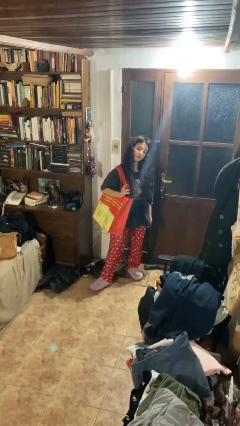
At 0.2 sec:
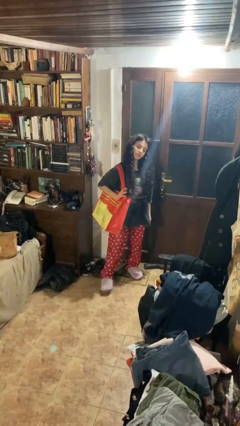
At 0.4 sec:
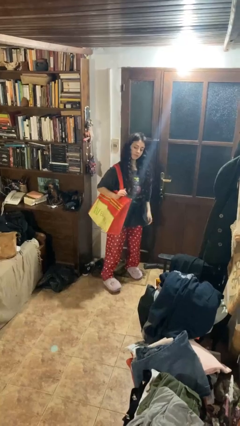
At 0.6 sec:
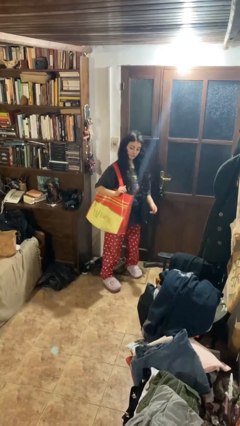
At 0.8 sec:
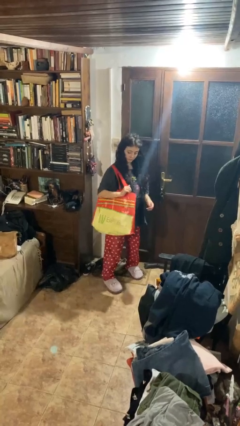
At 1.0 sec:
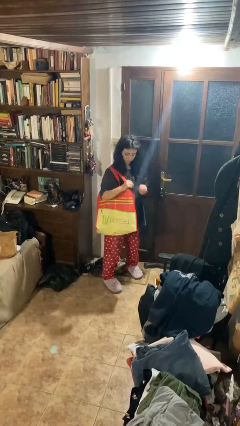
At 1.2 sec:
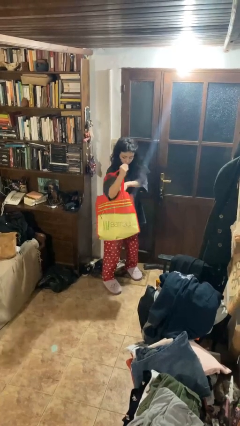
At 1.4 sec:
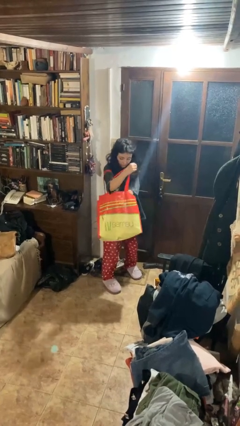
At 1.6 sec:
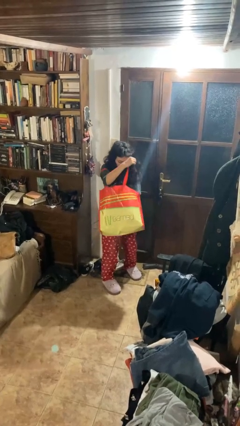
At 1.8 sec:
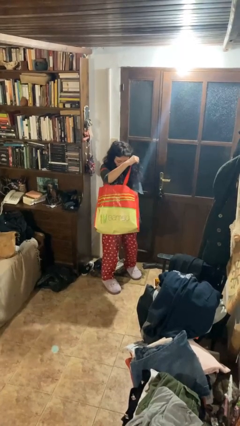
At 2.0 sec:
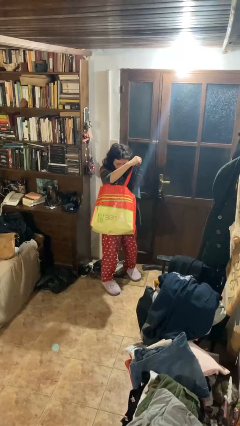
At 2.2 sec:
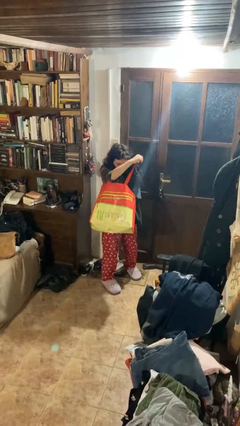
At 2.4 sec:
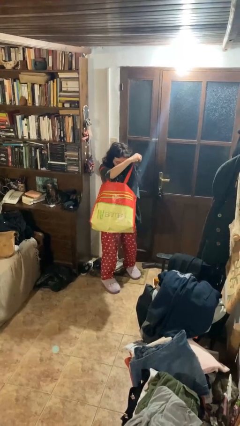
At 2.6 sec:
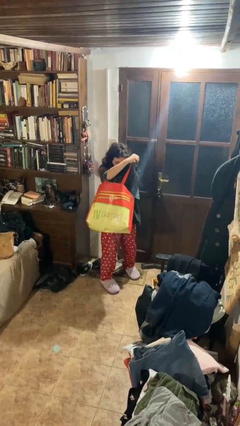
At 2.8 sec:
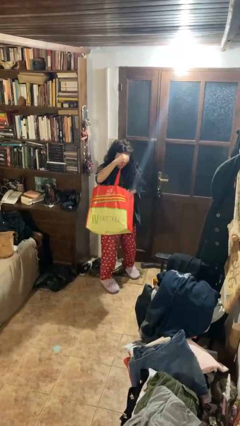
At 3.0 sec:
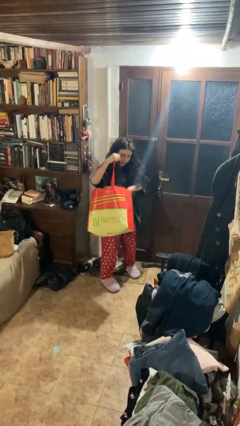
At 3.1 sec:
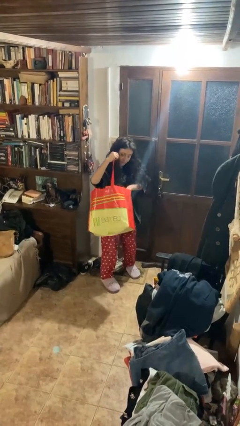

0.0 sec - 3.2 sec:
person searches in bag

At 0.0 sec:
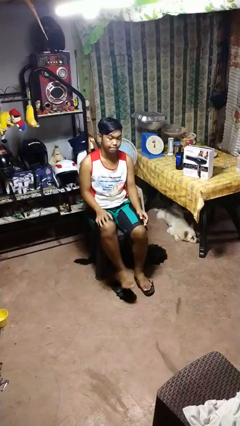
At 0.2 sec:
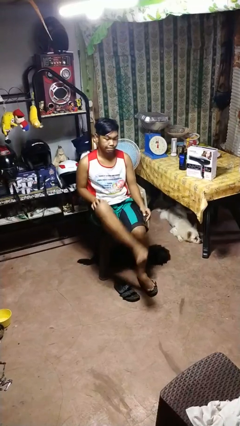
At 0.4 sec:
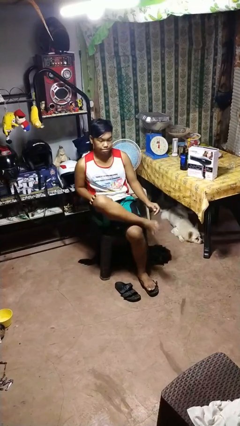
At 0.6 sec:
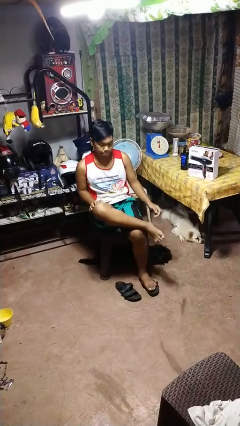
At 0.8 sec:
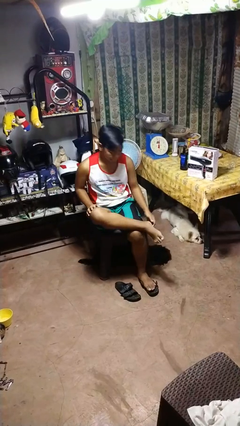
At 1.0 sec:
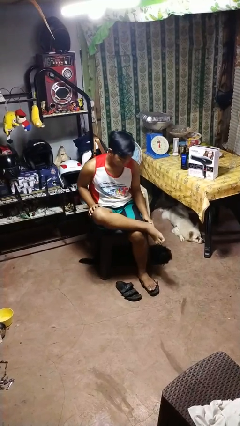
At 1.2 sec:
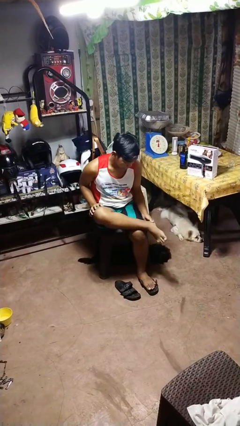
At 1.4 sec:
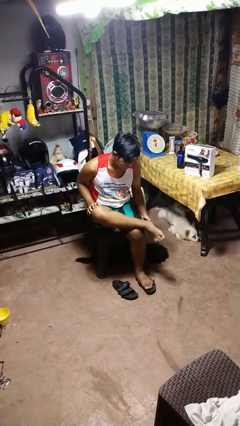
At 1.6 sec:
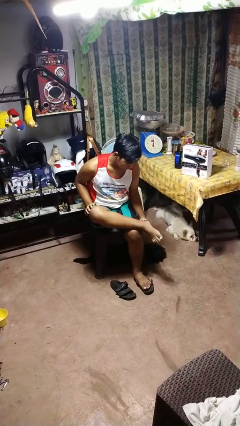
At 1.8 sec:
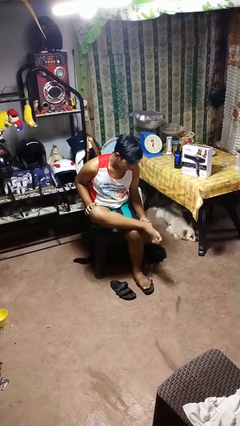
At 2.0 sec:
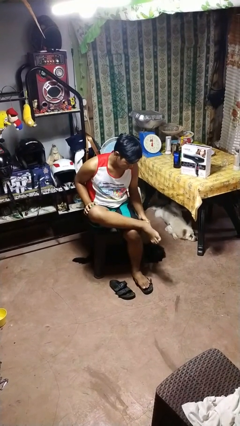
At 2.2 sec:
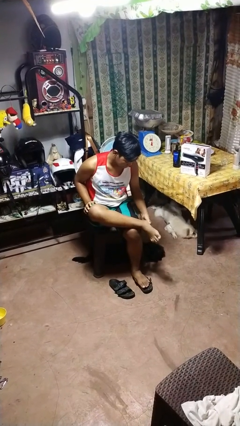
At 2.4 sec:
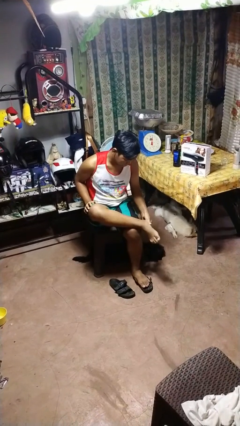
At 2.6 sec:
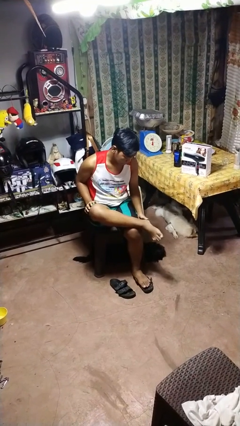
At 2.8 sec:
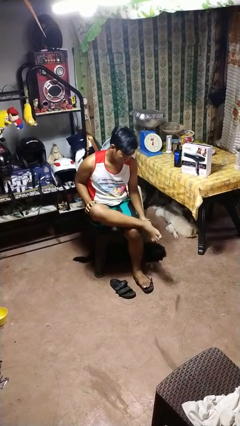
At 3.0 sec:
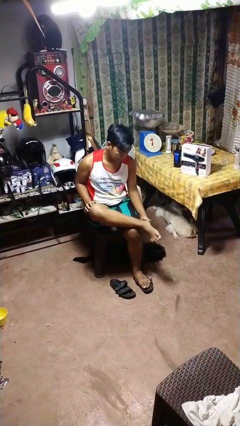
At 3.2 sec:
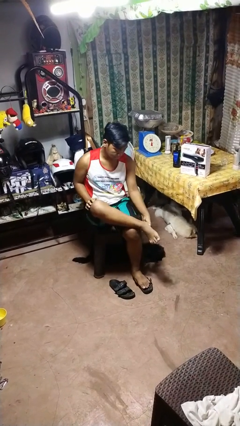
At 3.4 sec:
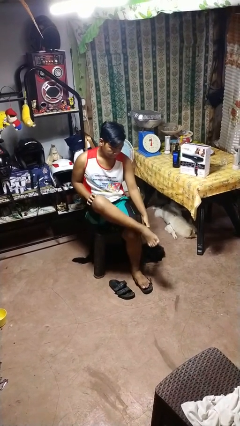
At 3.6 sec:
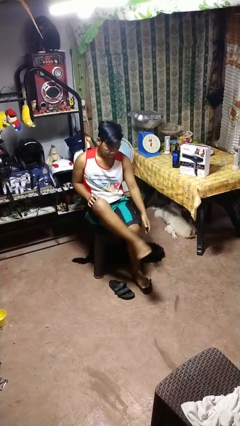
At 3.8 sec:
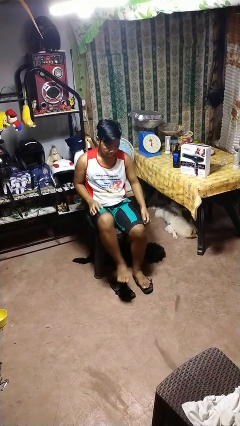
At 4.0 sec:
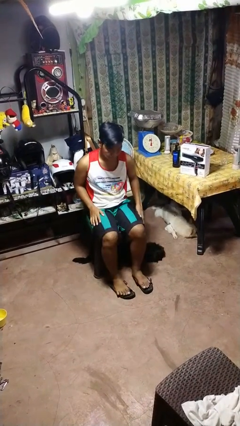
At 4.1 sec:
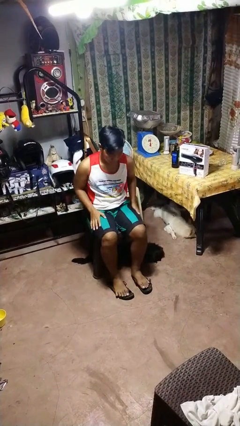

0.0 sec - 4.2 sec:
person rubs foot

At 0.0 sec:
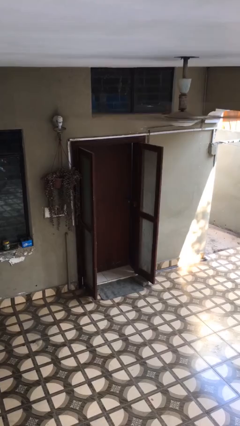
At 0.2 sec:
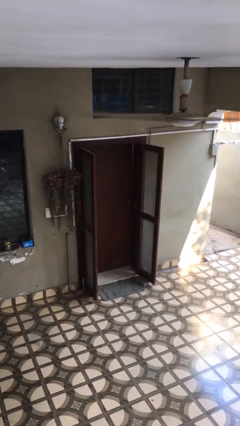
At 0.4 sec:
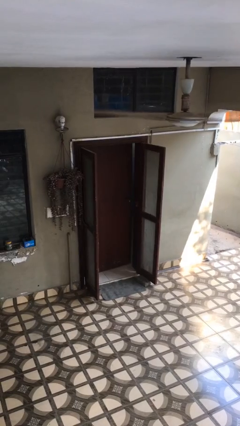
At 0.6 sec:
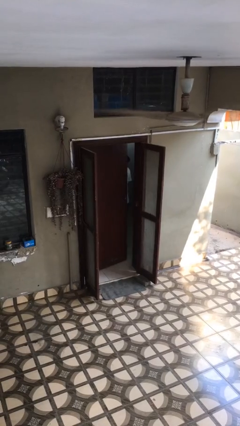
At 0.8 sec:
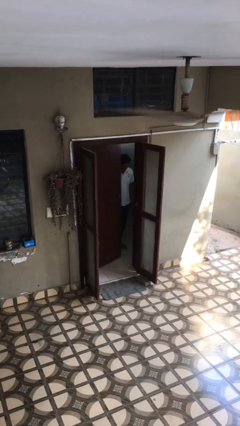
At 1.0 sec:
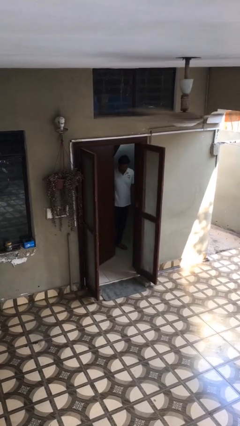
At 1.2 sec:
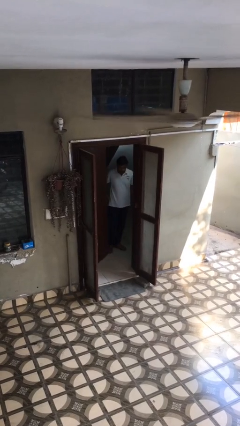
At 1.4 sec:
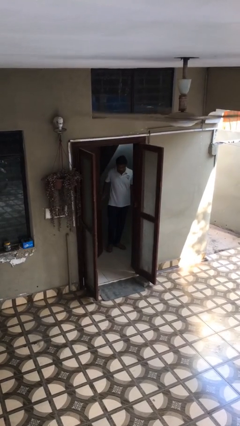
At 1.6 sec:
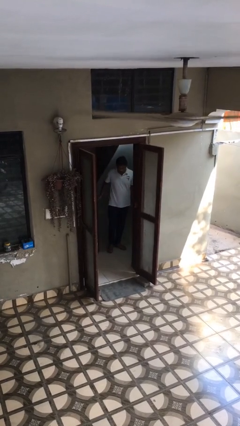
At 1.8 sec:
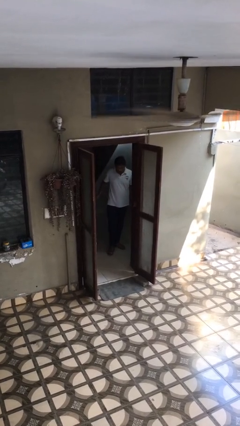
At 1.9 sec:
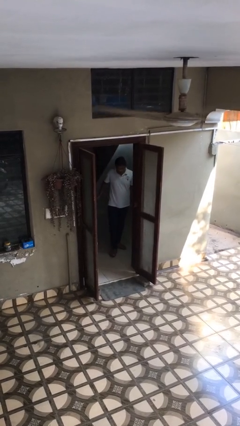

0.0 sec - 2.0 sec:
person opens facility door

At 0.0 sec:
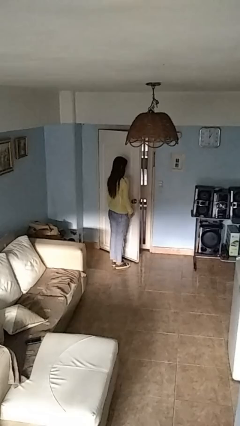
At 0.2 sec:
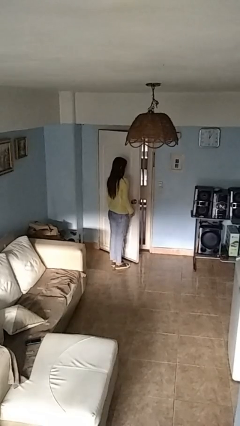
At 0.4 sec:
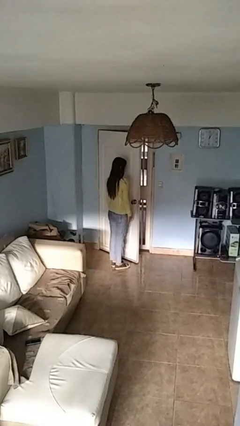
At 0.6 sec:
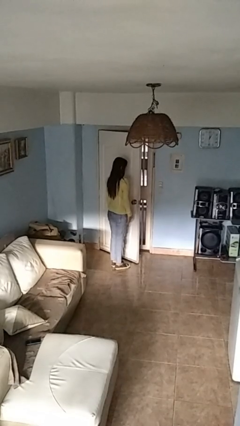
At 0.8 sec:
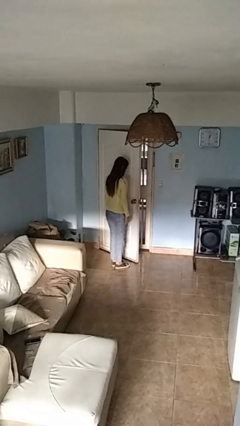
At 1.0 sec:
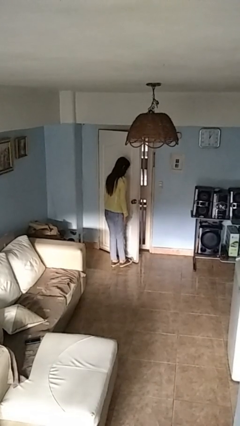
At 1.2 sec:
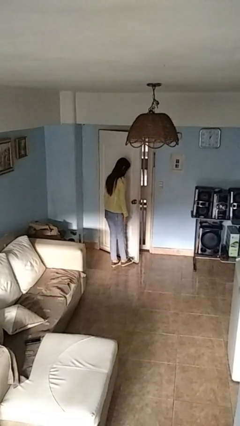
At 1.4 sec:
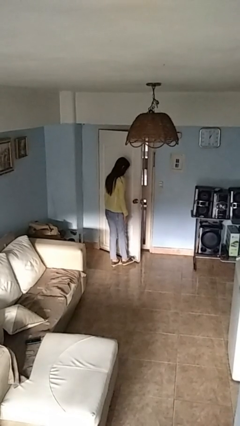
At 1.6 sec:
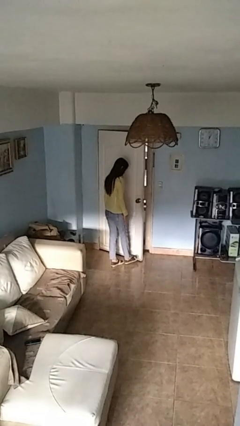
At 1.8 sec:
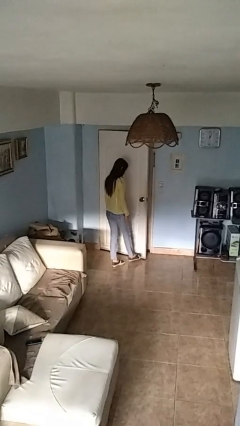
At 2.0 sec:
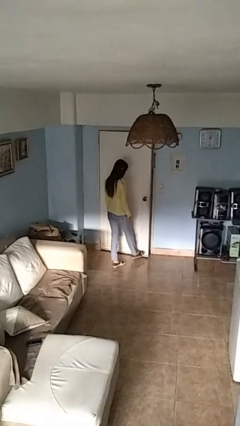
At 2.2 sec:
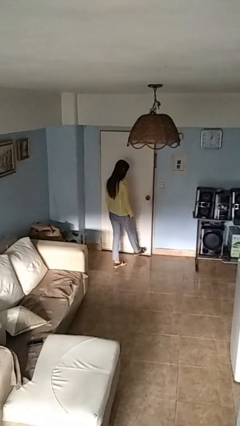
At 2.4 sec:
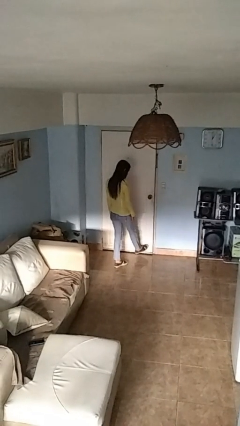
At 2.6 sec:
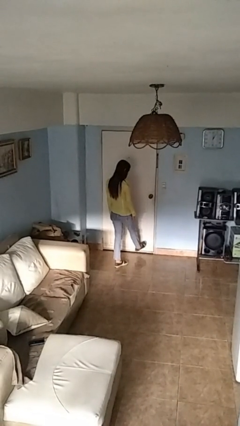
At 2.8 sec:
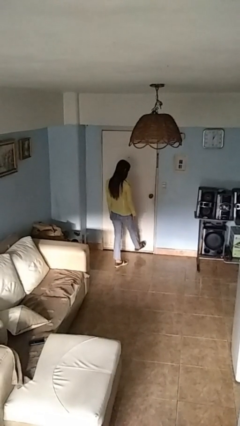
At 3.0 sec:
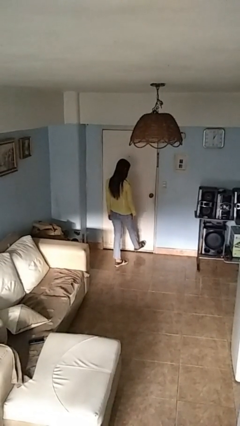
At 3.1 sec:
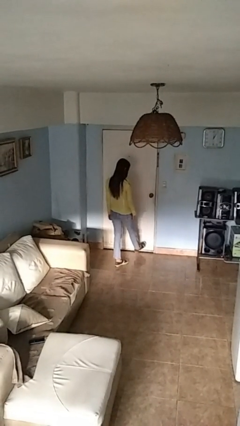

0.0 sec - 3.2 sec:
person closes door with foot

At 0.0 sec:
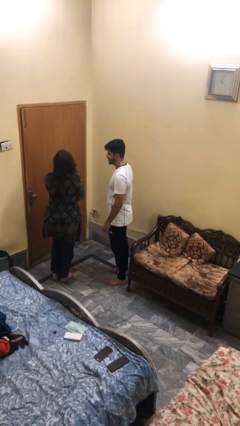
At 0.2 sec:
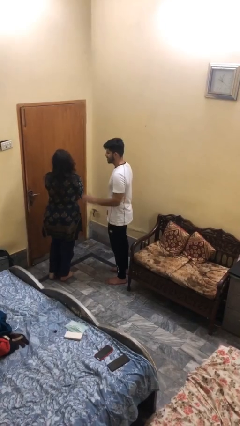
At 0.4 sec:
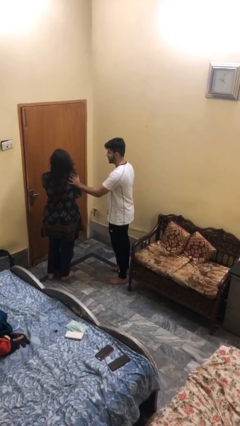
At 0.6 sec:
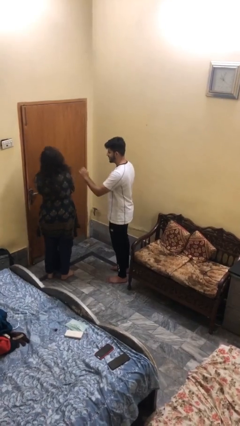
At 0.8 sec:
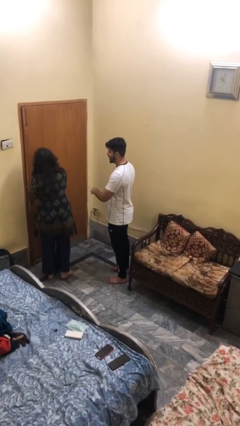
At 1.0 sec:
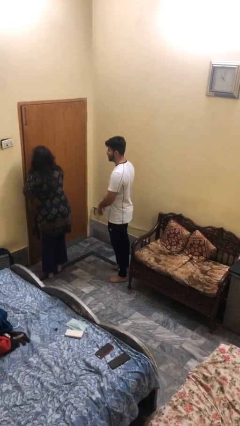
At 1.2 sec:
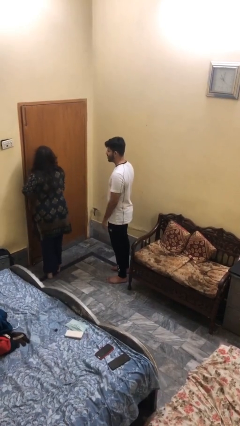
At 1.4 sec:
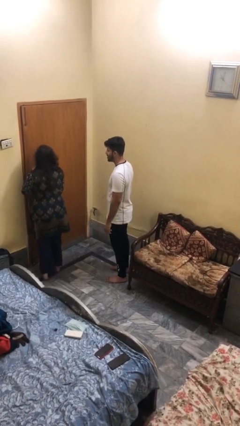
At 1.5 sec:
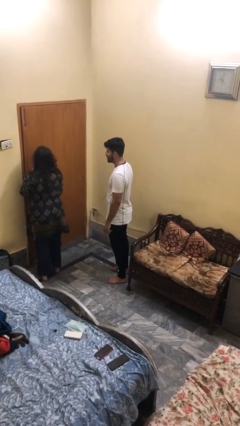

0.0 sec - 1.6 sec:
person shoves person

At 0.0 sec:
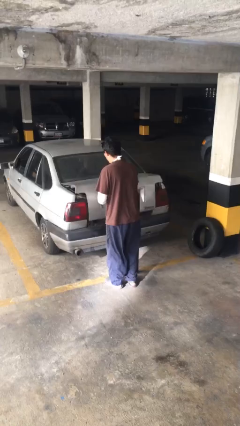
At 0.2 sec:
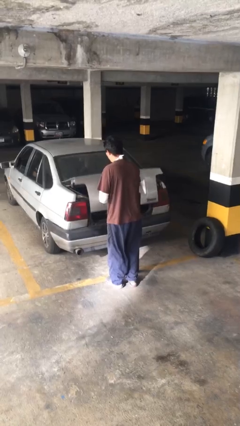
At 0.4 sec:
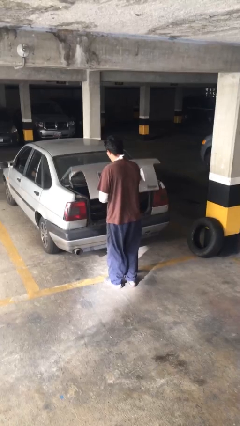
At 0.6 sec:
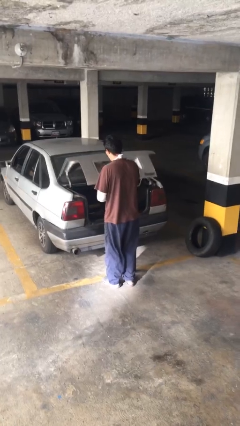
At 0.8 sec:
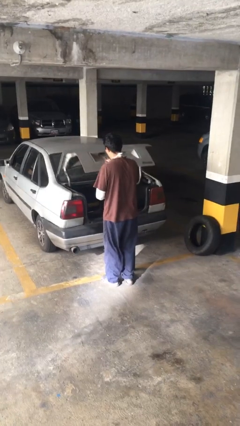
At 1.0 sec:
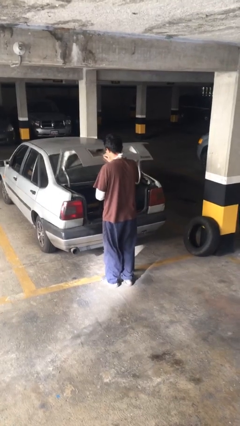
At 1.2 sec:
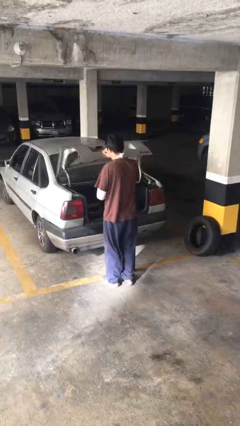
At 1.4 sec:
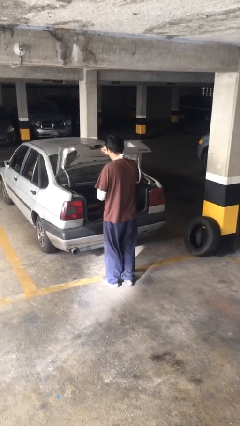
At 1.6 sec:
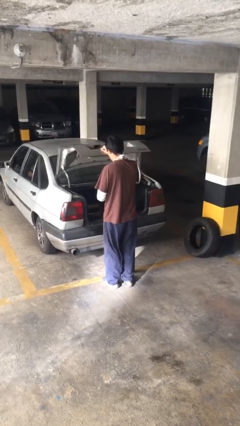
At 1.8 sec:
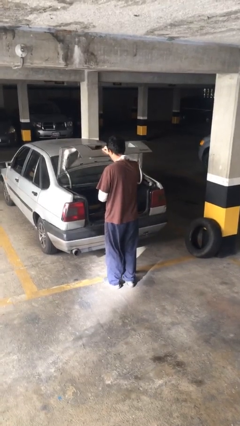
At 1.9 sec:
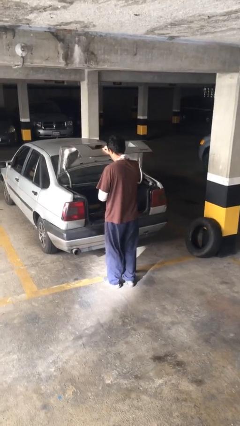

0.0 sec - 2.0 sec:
person opens car trunk

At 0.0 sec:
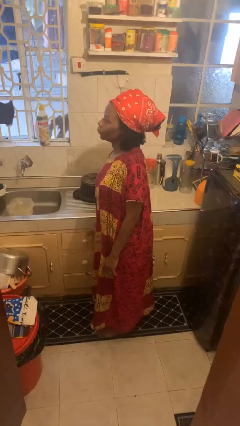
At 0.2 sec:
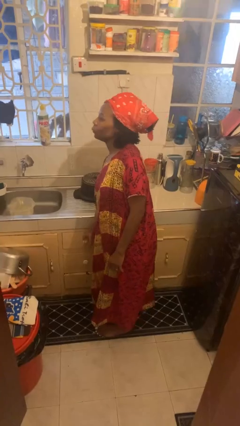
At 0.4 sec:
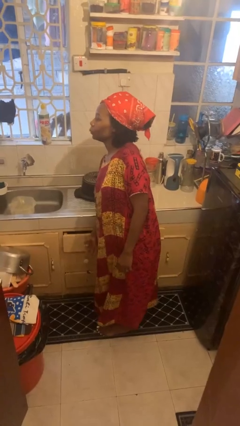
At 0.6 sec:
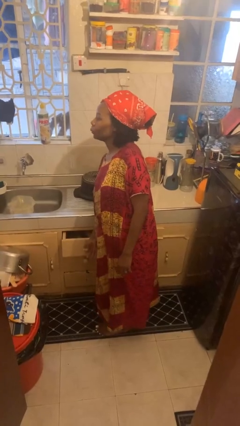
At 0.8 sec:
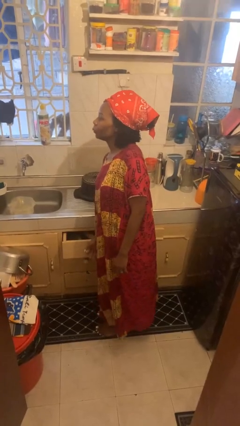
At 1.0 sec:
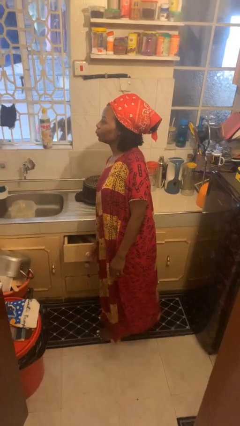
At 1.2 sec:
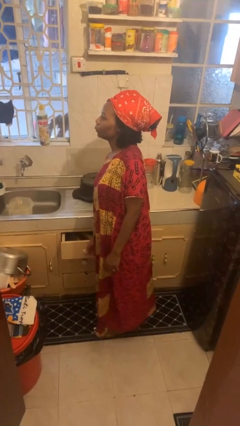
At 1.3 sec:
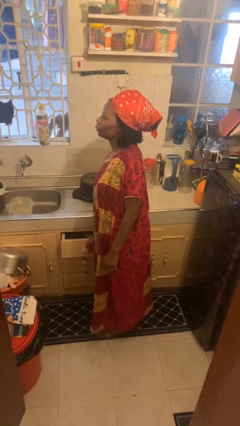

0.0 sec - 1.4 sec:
person opens kitchen drawer
